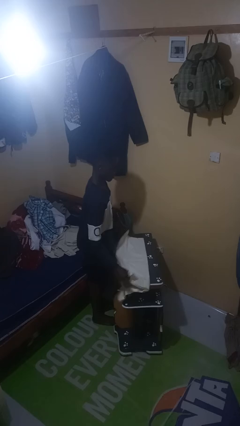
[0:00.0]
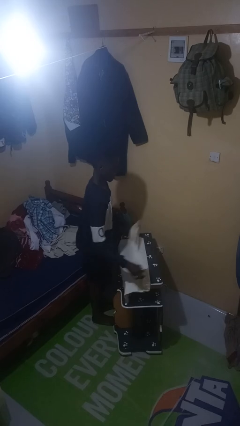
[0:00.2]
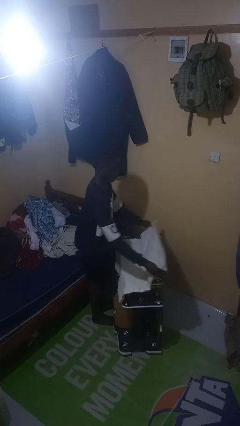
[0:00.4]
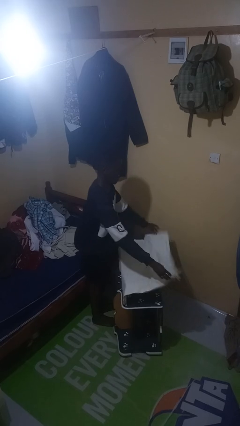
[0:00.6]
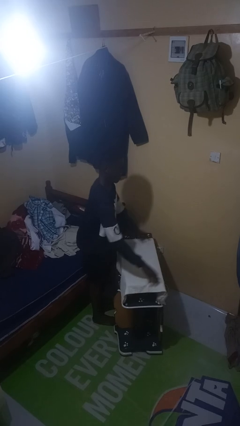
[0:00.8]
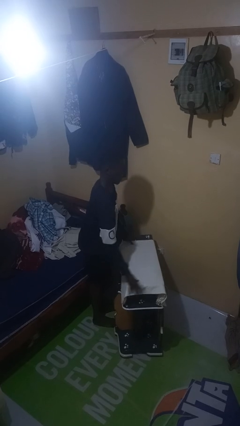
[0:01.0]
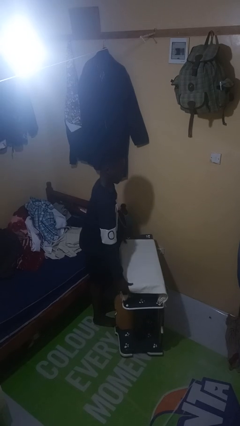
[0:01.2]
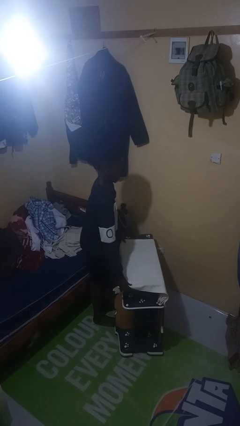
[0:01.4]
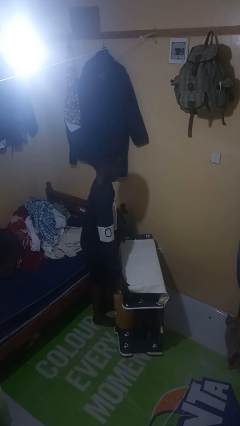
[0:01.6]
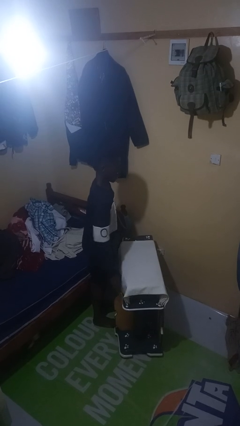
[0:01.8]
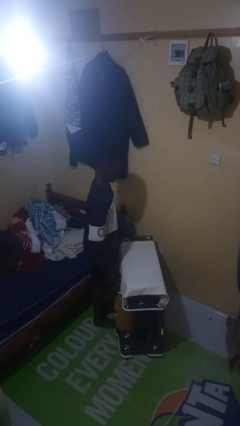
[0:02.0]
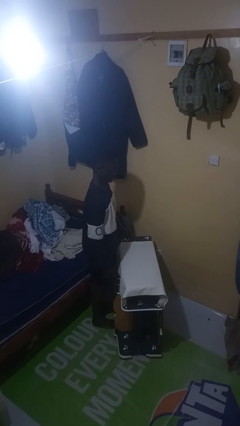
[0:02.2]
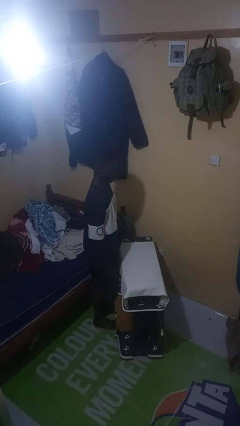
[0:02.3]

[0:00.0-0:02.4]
person spreads tablecloth

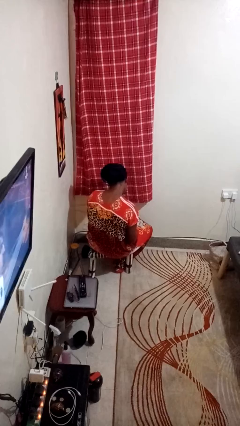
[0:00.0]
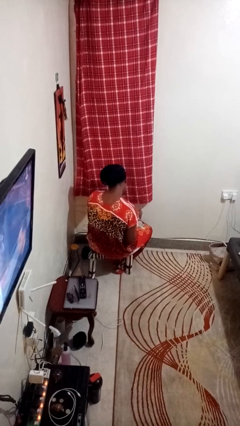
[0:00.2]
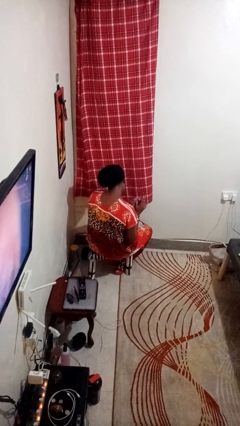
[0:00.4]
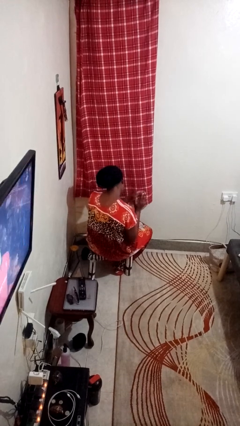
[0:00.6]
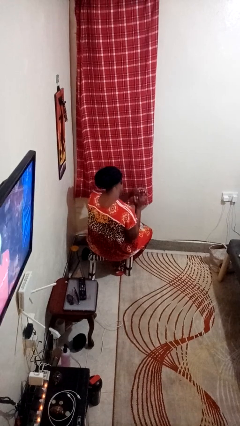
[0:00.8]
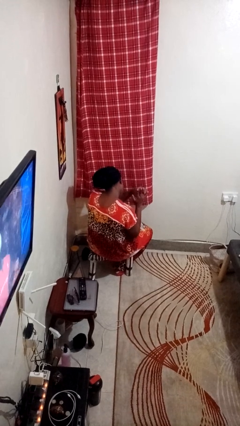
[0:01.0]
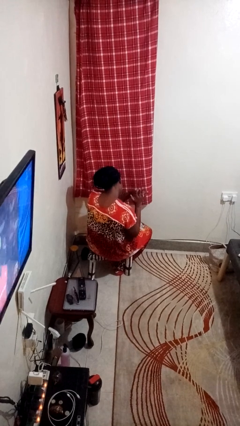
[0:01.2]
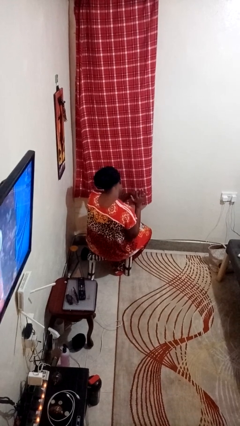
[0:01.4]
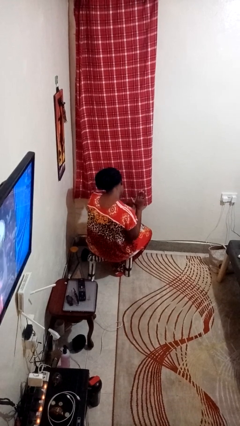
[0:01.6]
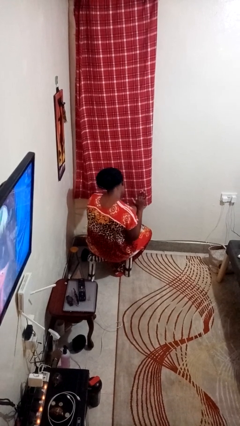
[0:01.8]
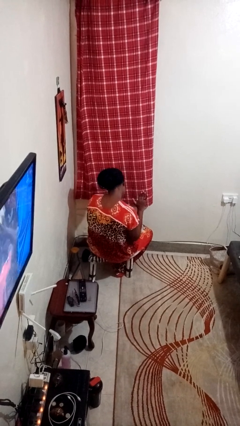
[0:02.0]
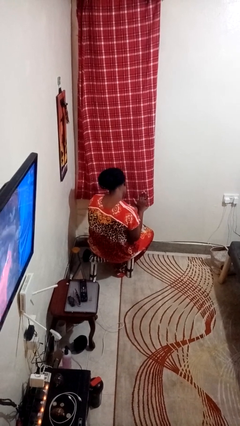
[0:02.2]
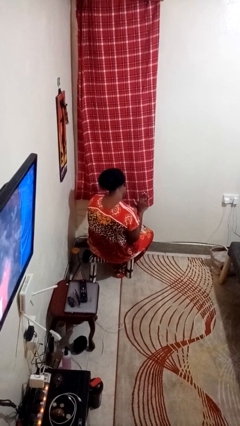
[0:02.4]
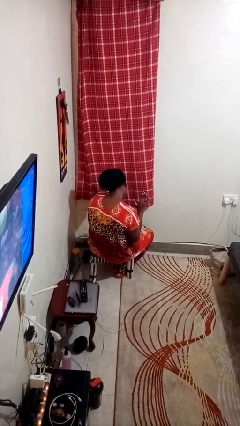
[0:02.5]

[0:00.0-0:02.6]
person puts on ring

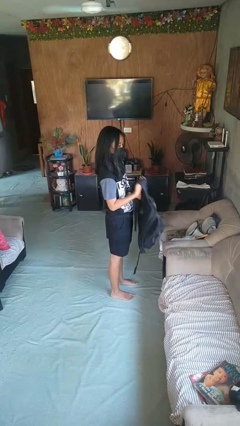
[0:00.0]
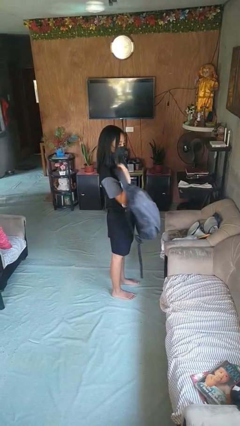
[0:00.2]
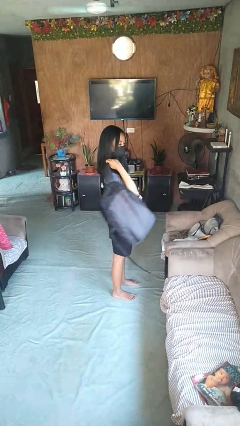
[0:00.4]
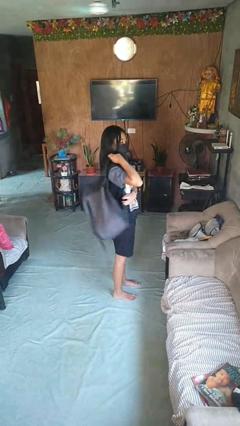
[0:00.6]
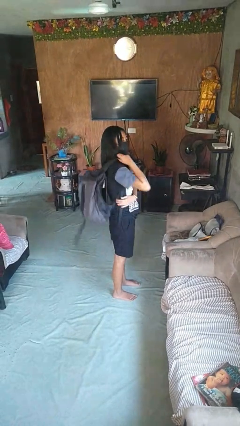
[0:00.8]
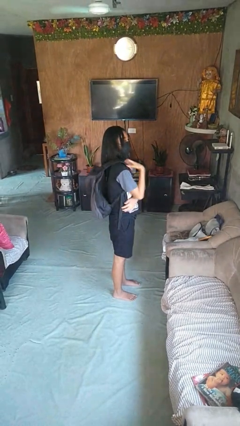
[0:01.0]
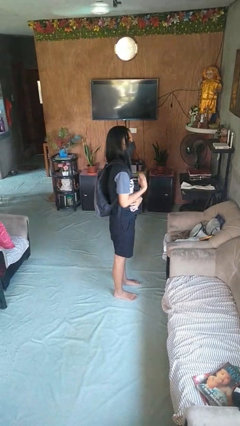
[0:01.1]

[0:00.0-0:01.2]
person puts on backpack

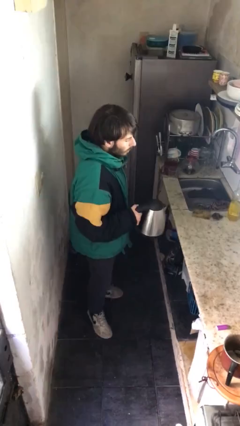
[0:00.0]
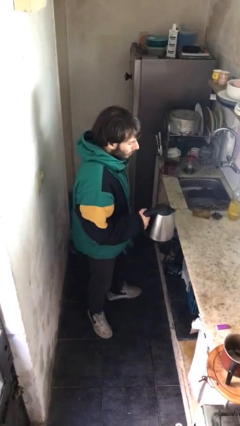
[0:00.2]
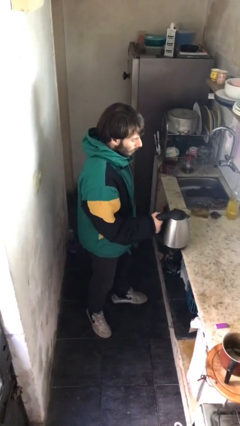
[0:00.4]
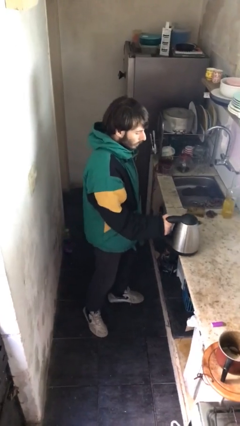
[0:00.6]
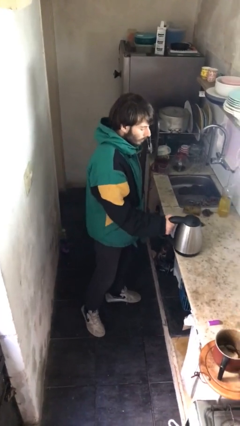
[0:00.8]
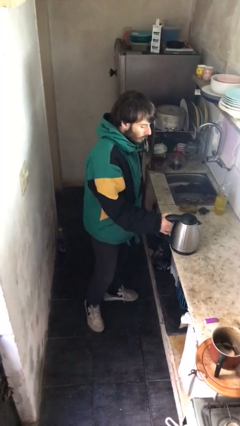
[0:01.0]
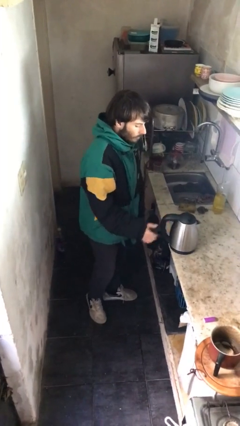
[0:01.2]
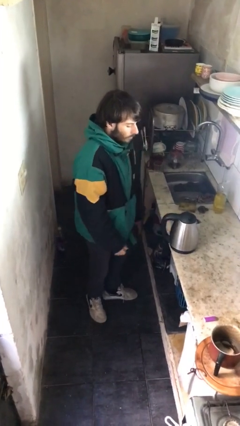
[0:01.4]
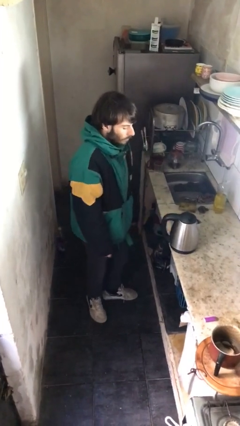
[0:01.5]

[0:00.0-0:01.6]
person puts down object on countertop

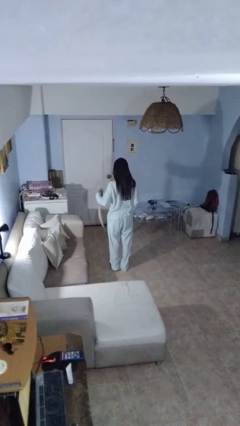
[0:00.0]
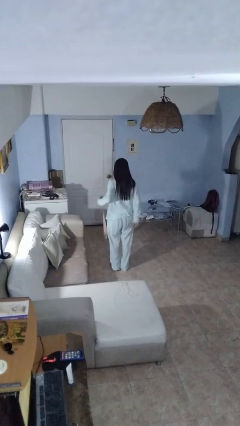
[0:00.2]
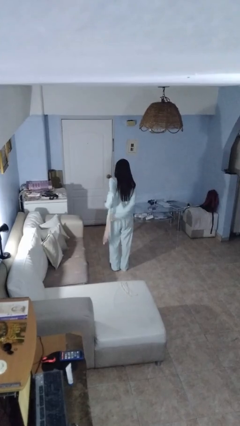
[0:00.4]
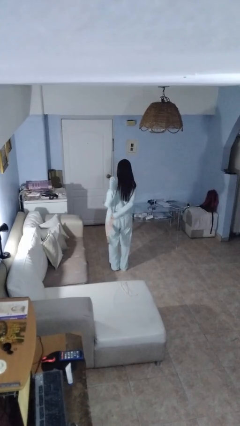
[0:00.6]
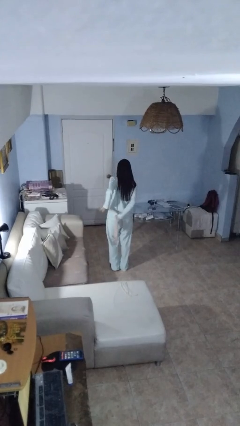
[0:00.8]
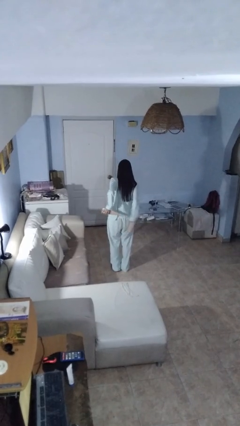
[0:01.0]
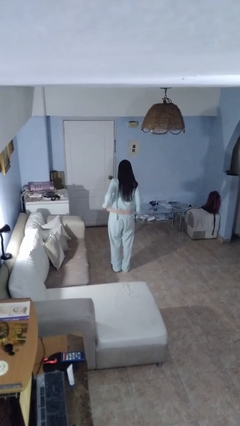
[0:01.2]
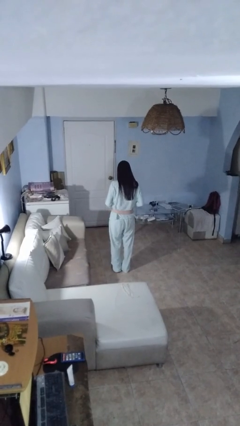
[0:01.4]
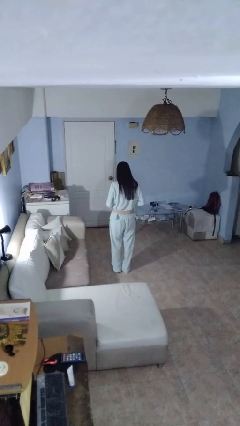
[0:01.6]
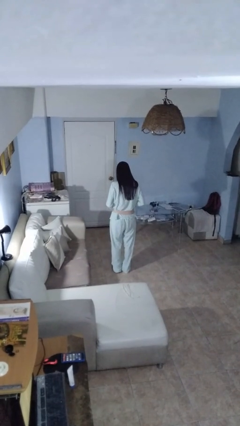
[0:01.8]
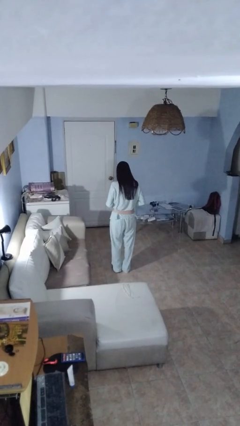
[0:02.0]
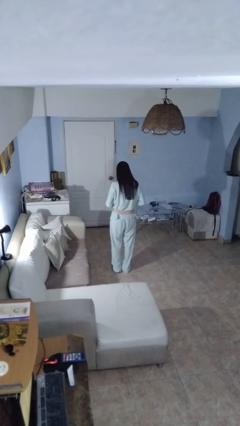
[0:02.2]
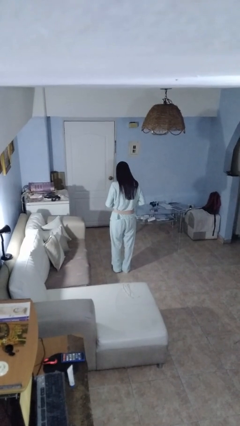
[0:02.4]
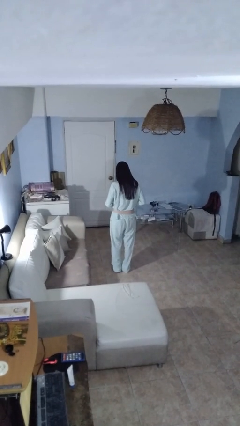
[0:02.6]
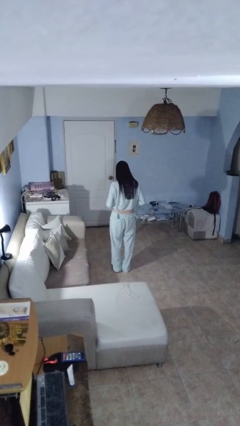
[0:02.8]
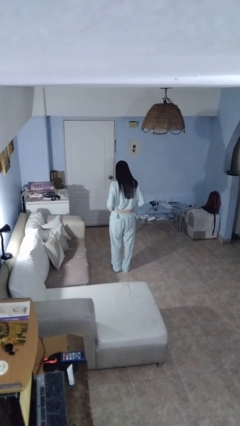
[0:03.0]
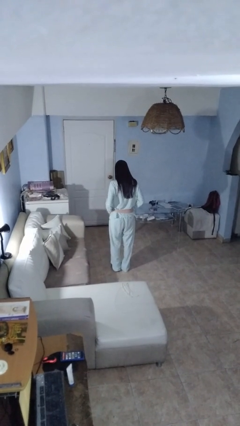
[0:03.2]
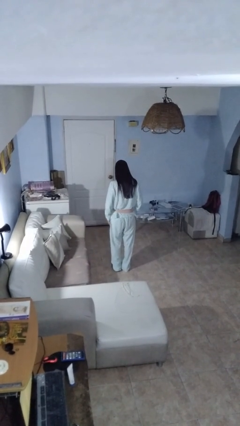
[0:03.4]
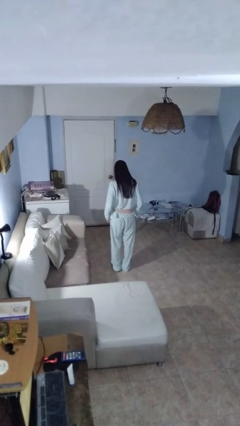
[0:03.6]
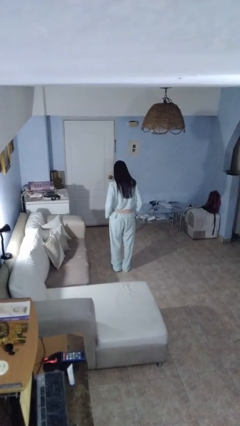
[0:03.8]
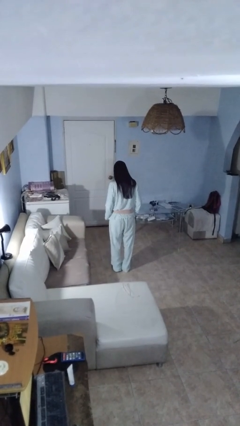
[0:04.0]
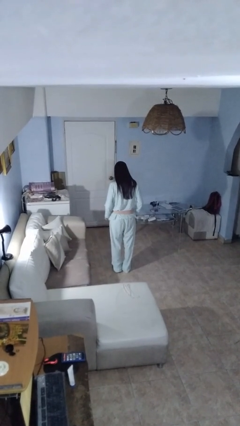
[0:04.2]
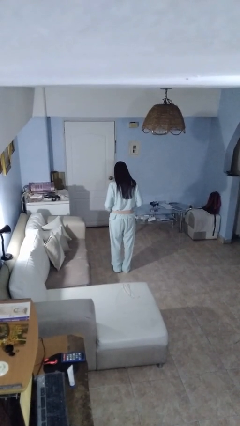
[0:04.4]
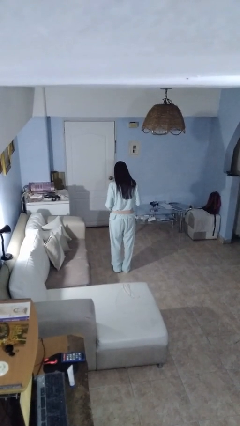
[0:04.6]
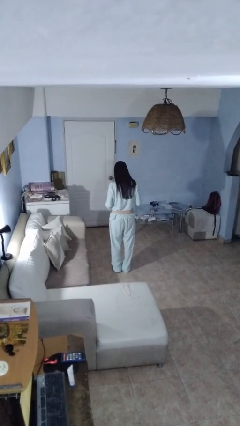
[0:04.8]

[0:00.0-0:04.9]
person puts on belt

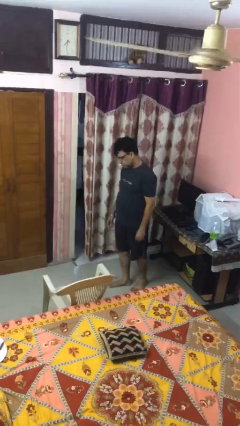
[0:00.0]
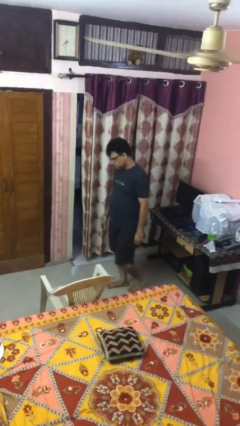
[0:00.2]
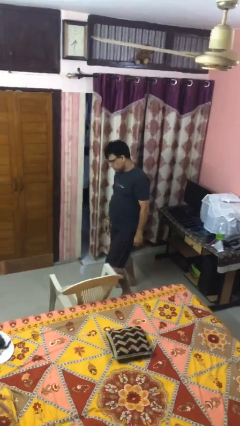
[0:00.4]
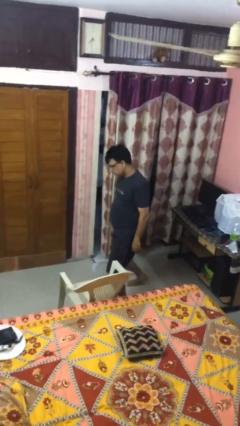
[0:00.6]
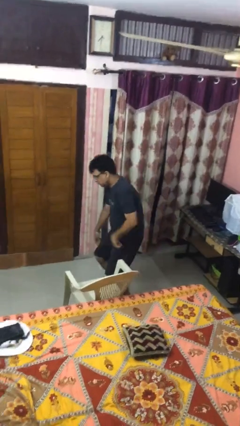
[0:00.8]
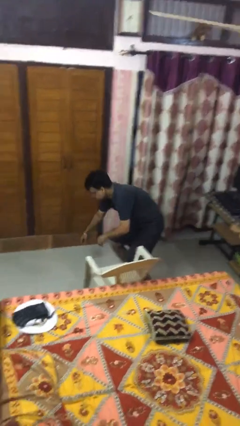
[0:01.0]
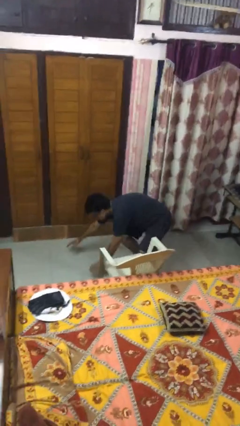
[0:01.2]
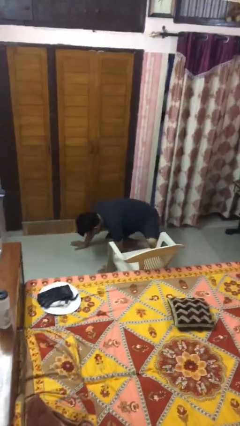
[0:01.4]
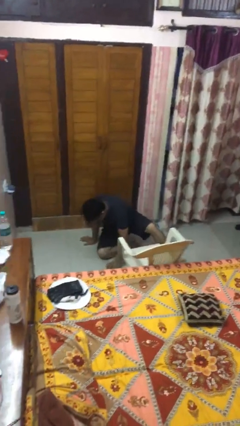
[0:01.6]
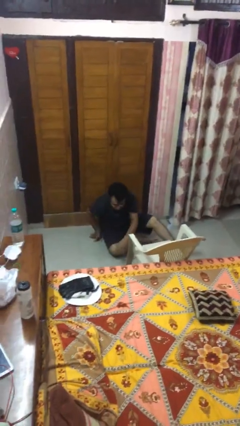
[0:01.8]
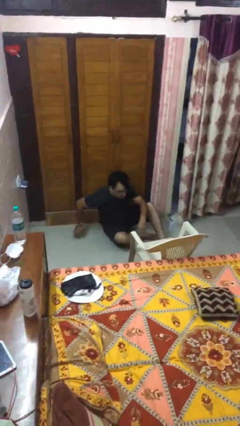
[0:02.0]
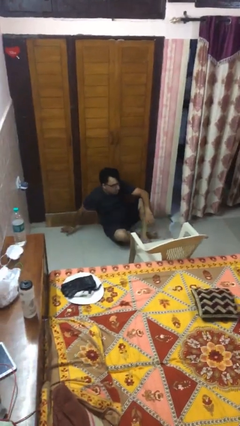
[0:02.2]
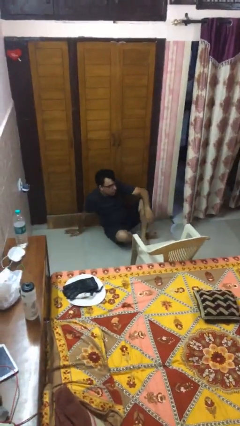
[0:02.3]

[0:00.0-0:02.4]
person trips on object on floor

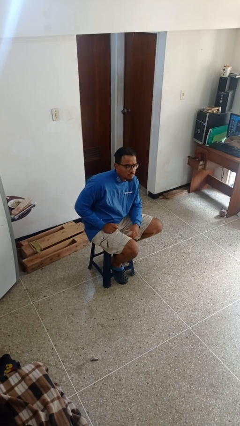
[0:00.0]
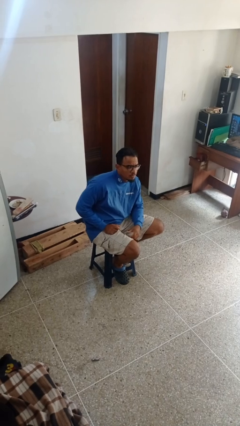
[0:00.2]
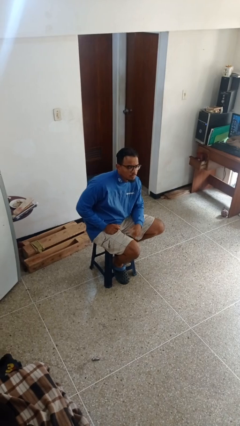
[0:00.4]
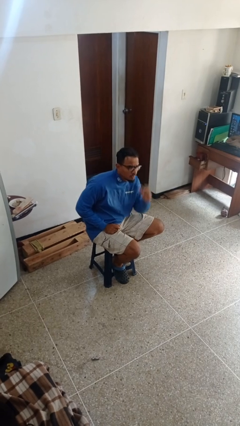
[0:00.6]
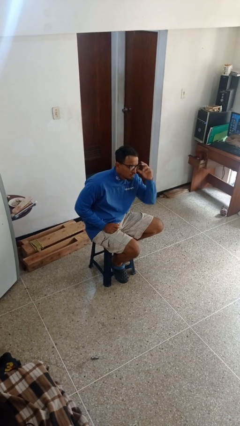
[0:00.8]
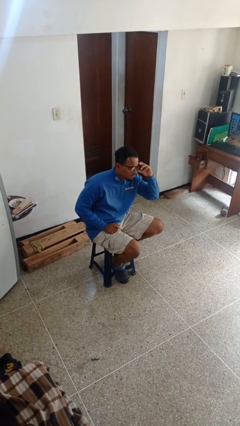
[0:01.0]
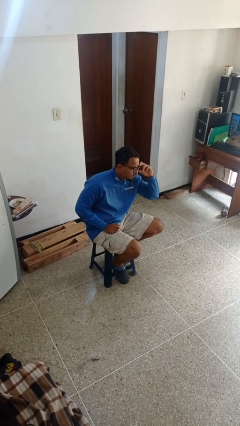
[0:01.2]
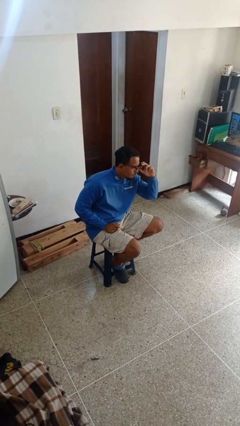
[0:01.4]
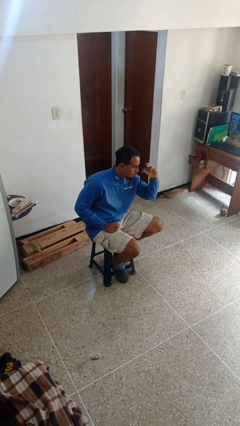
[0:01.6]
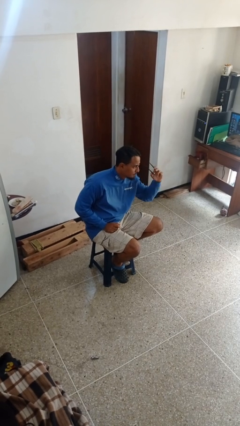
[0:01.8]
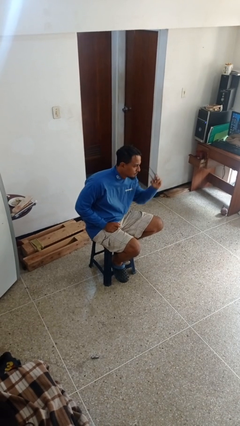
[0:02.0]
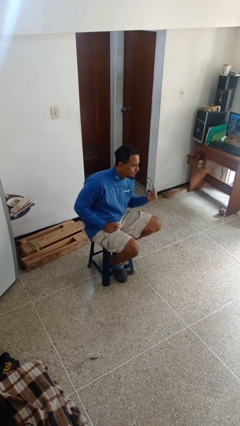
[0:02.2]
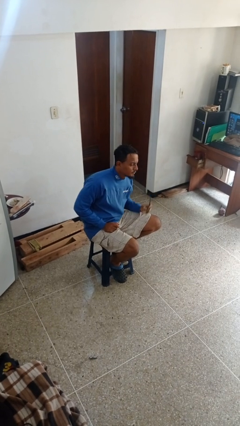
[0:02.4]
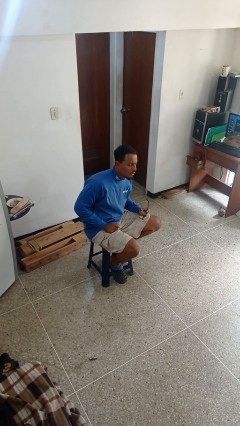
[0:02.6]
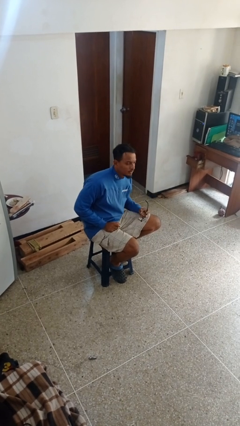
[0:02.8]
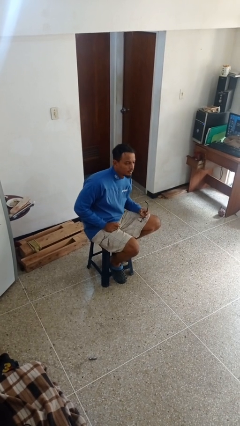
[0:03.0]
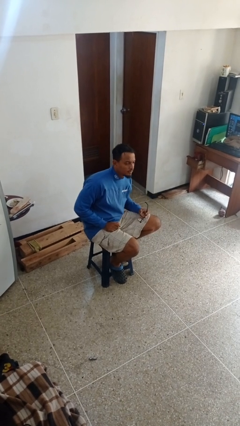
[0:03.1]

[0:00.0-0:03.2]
person takes off glasses
